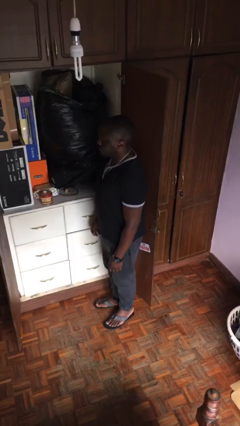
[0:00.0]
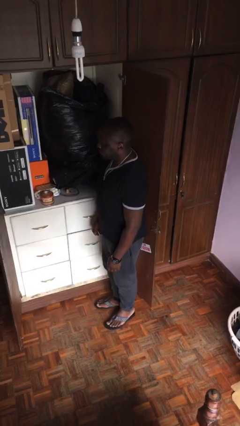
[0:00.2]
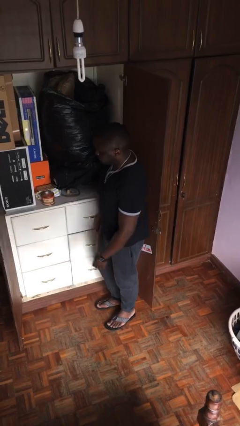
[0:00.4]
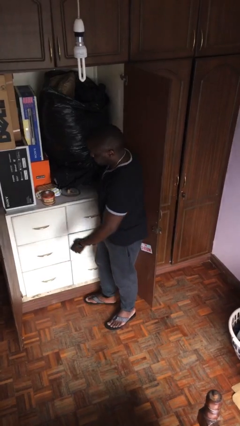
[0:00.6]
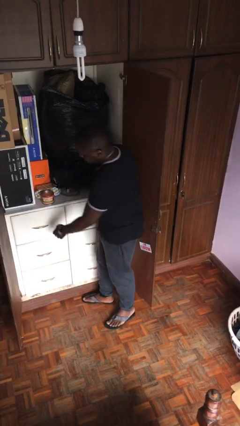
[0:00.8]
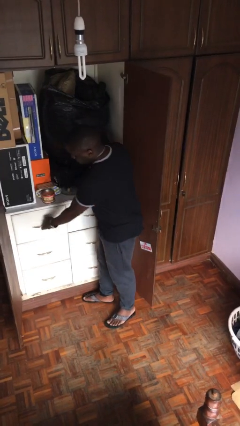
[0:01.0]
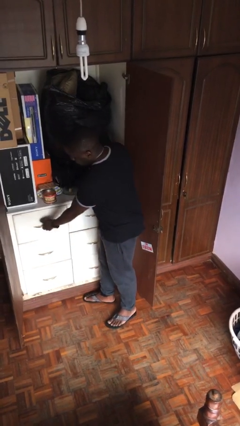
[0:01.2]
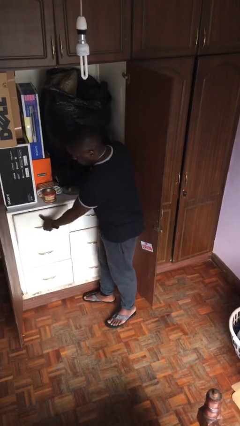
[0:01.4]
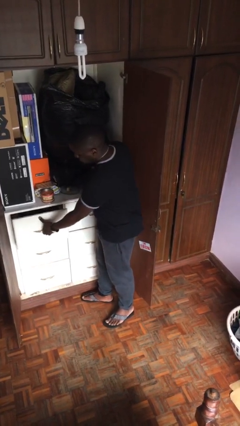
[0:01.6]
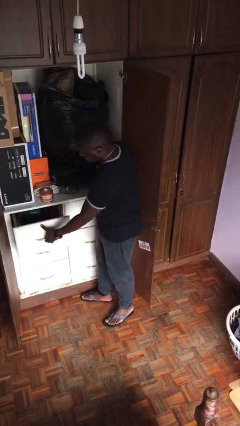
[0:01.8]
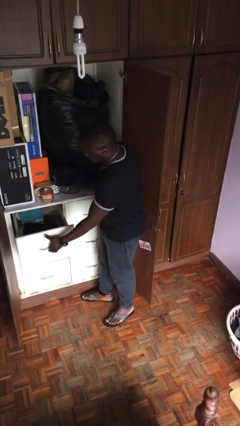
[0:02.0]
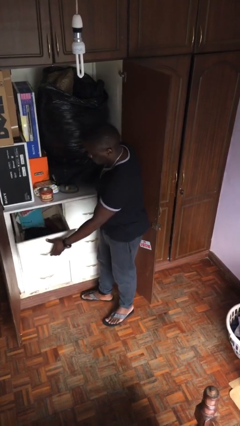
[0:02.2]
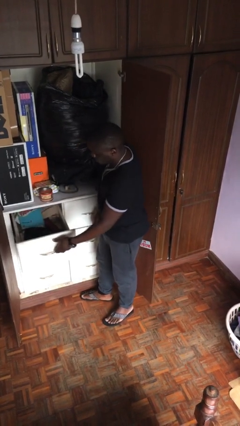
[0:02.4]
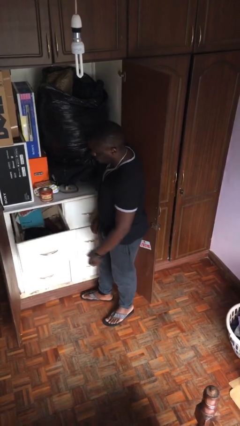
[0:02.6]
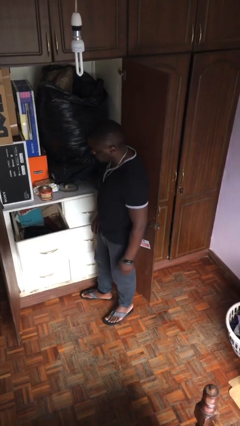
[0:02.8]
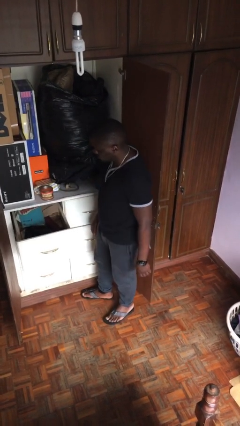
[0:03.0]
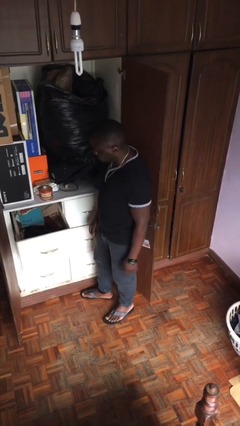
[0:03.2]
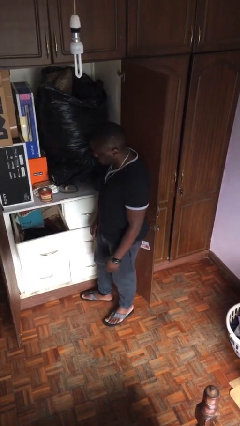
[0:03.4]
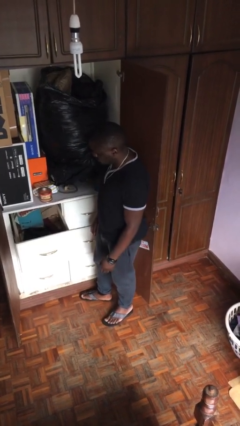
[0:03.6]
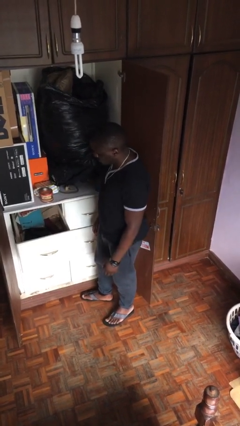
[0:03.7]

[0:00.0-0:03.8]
person opens dresser drawer

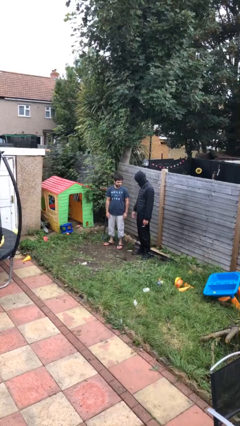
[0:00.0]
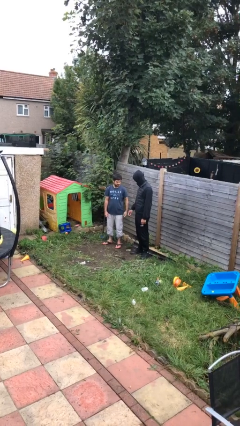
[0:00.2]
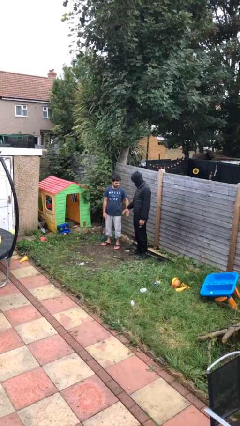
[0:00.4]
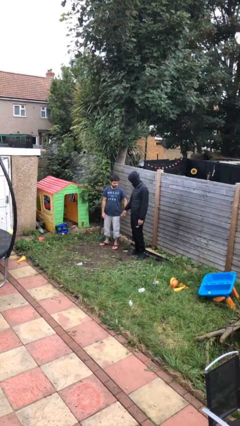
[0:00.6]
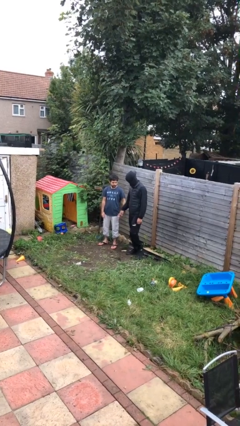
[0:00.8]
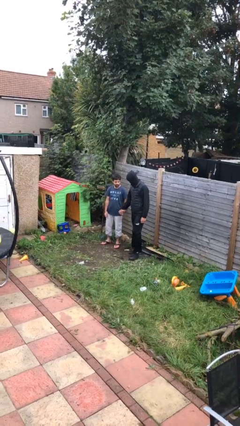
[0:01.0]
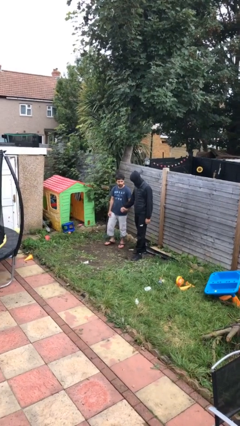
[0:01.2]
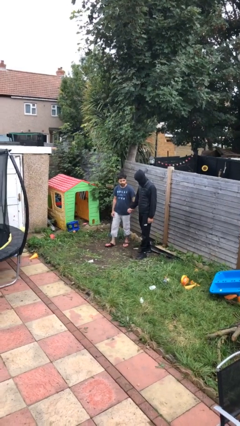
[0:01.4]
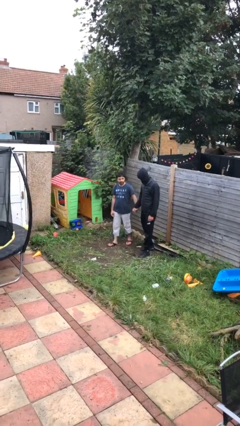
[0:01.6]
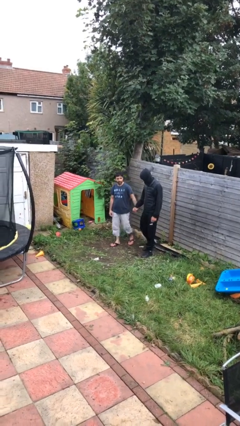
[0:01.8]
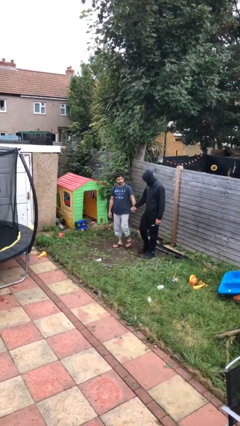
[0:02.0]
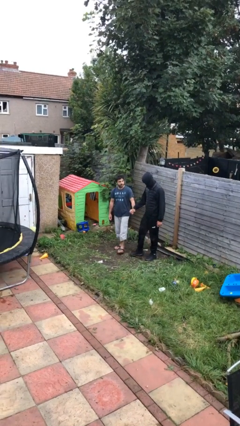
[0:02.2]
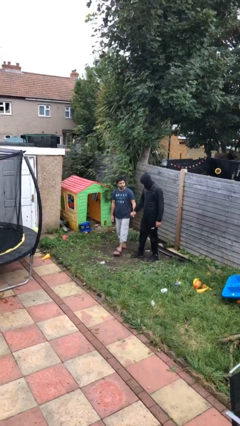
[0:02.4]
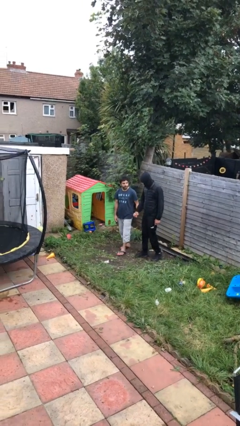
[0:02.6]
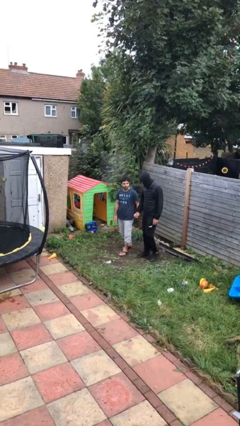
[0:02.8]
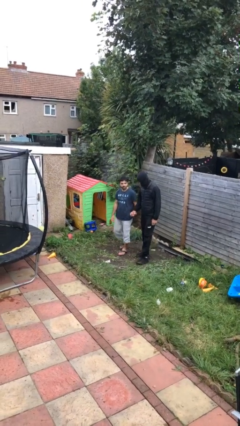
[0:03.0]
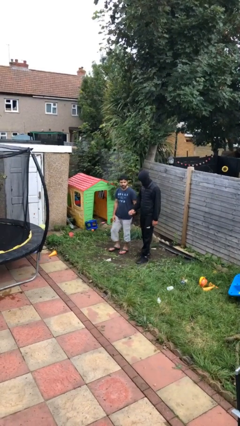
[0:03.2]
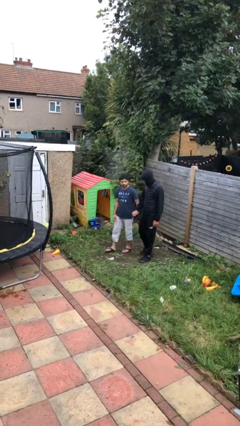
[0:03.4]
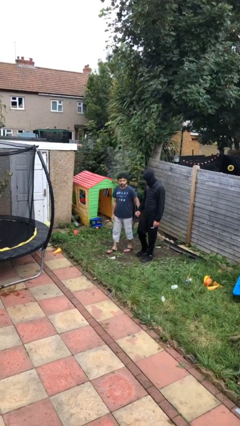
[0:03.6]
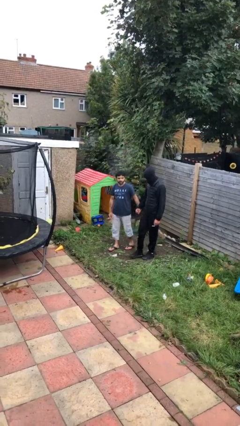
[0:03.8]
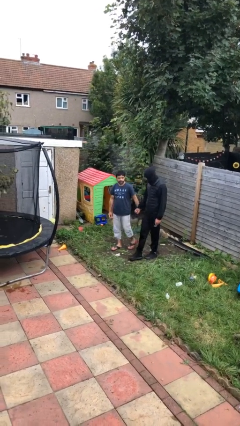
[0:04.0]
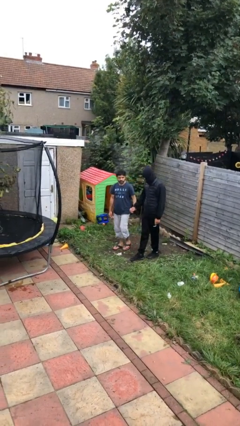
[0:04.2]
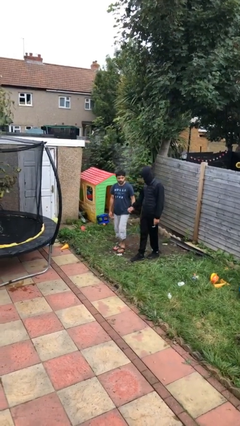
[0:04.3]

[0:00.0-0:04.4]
person holds hand

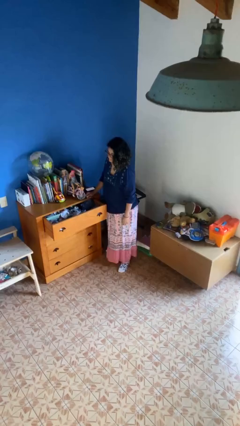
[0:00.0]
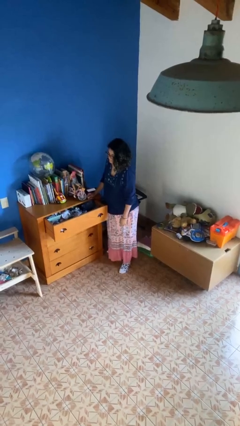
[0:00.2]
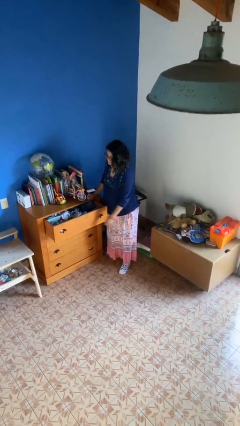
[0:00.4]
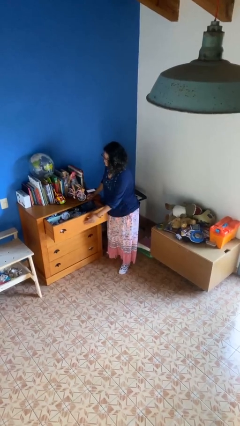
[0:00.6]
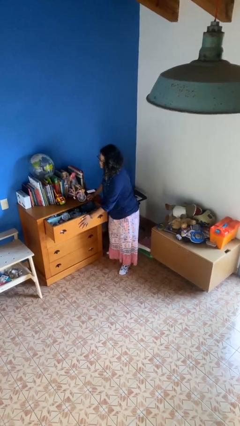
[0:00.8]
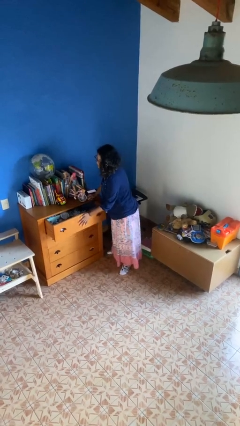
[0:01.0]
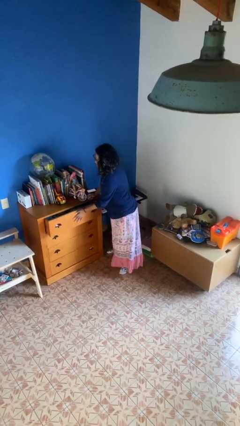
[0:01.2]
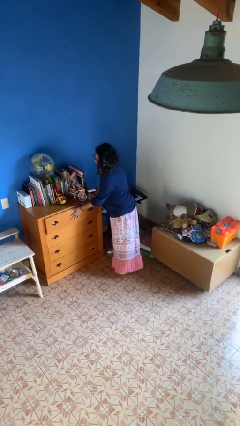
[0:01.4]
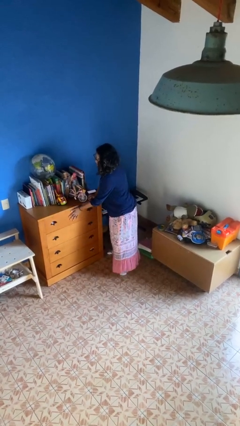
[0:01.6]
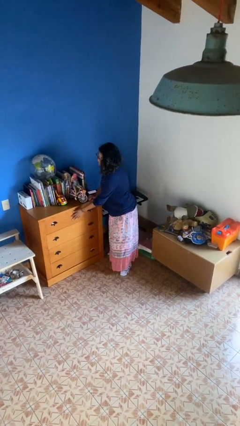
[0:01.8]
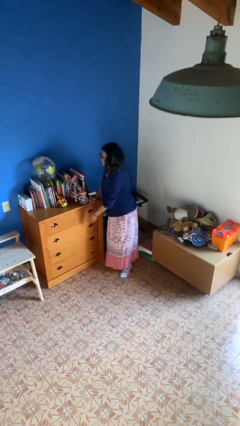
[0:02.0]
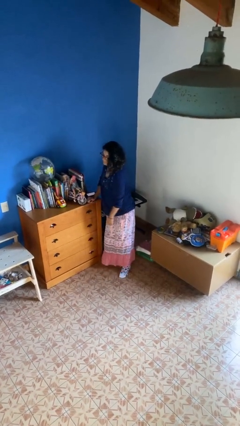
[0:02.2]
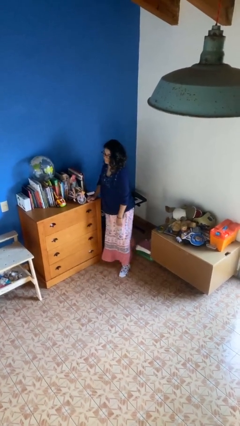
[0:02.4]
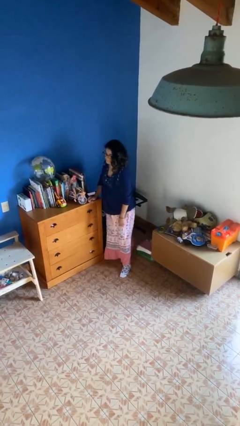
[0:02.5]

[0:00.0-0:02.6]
person closes dresser drawer

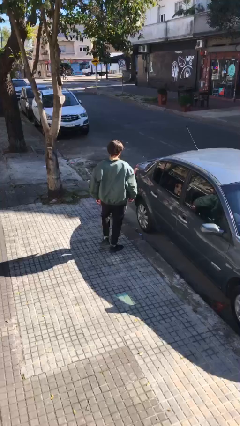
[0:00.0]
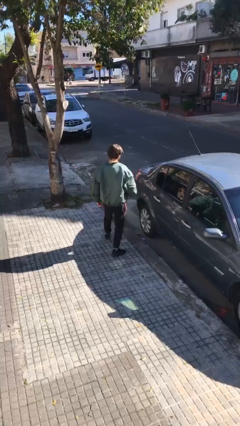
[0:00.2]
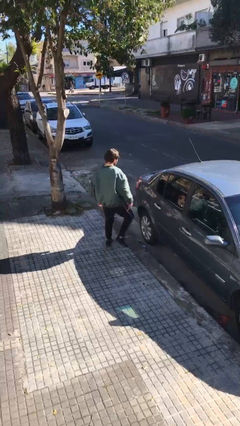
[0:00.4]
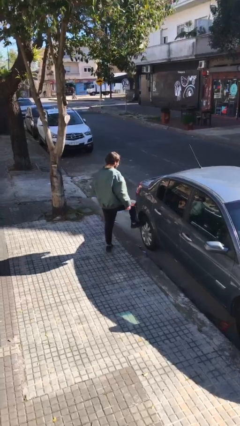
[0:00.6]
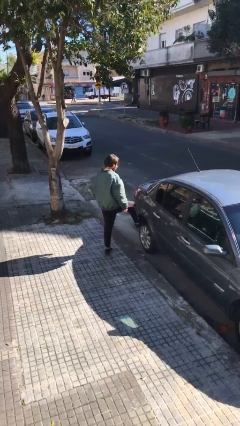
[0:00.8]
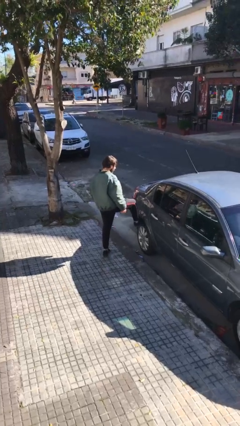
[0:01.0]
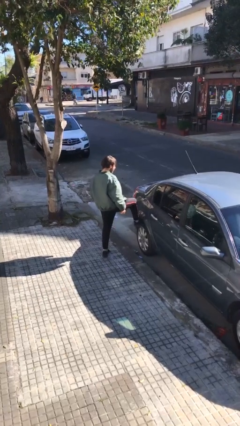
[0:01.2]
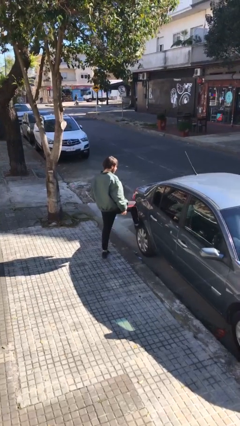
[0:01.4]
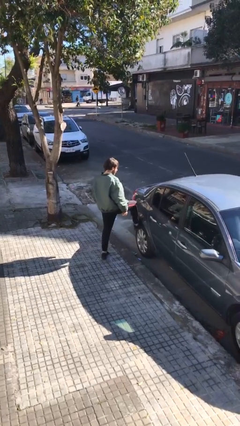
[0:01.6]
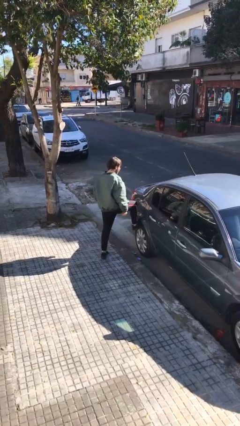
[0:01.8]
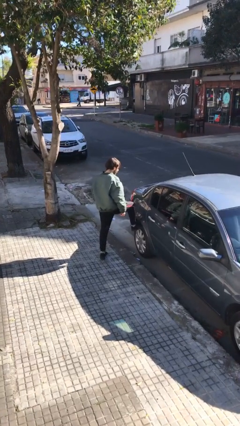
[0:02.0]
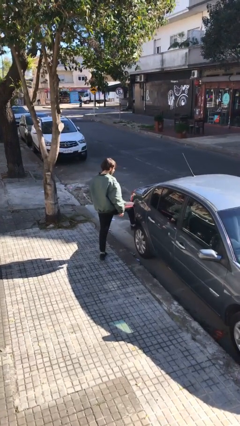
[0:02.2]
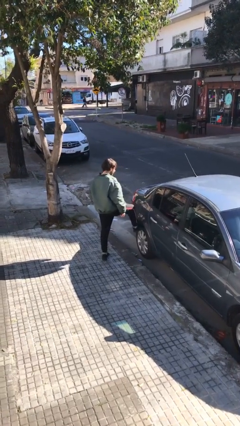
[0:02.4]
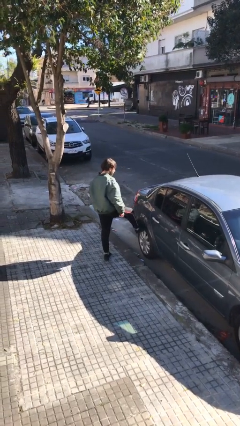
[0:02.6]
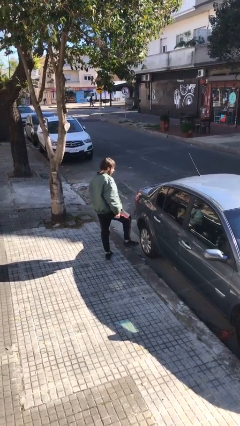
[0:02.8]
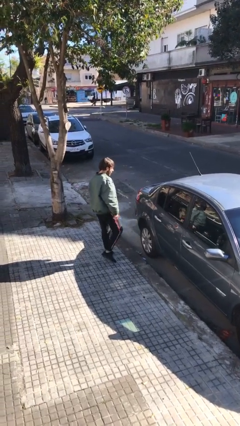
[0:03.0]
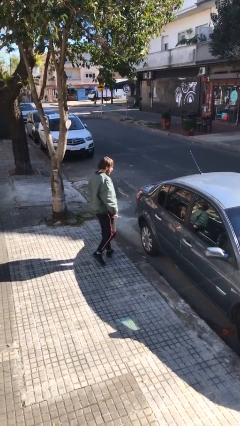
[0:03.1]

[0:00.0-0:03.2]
person kicks car tires

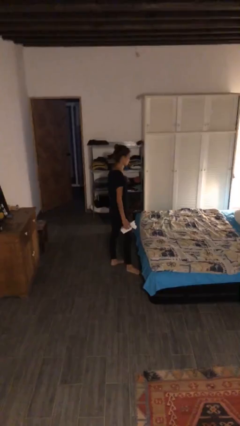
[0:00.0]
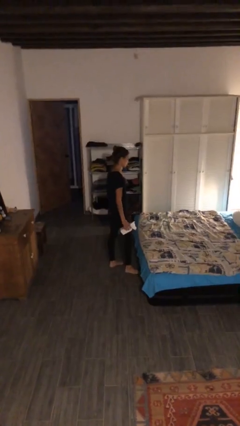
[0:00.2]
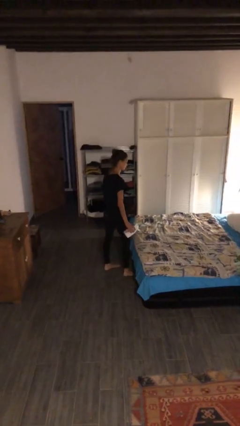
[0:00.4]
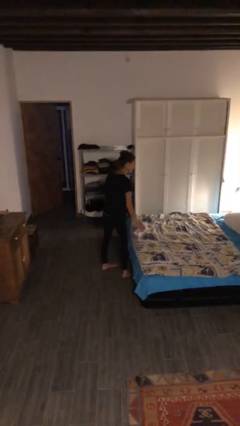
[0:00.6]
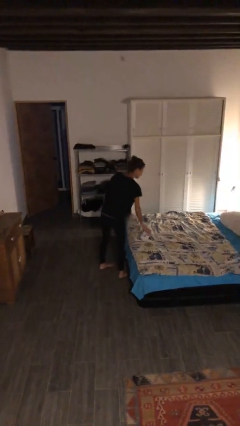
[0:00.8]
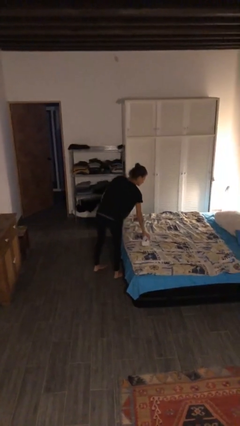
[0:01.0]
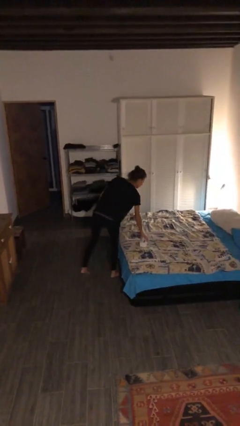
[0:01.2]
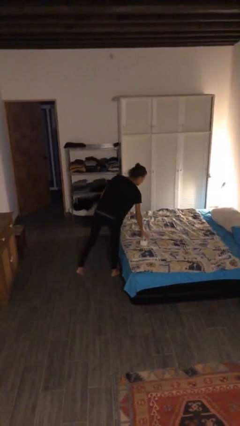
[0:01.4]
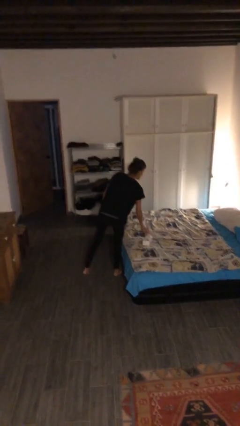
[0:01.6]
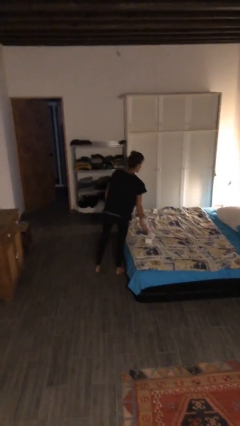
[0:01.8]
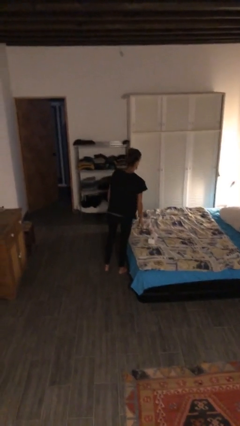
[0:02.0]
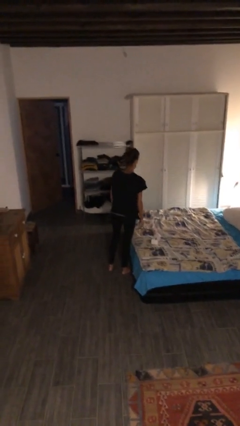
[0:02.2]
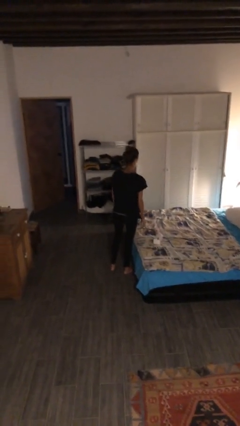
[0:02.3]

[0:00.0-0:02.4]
person puts down object on bed

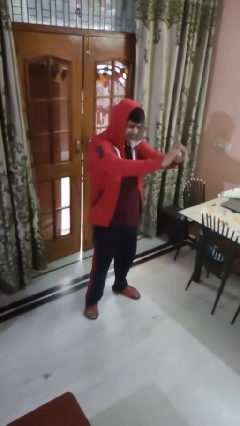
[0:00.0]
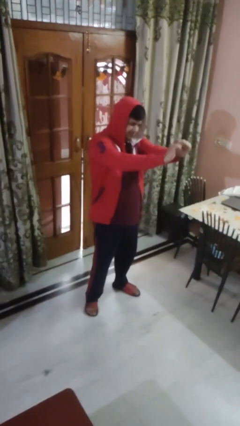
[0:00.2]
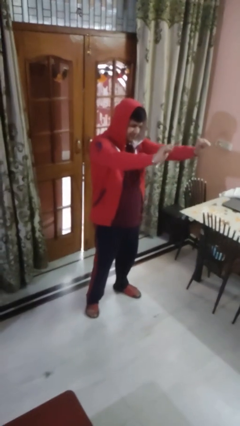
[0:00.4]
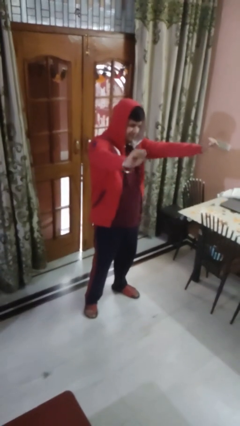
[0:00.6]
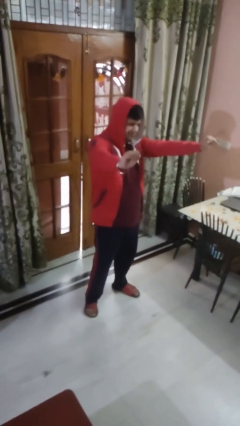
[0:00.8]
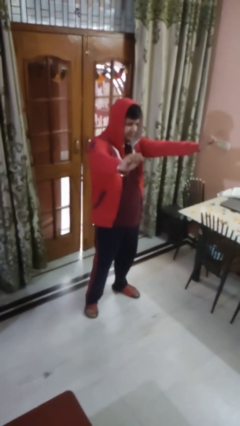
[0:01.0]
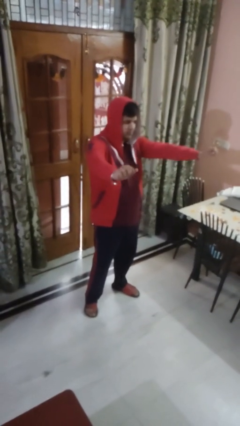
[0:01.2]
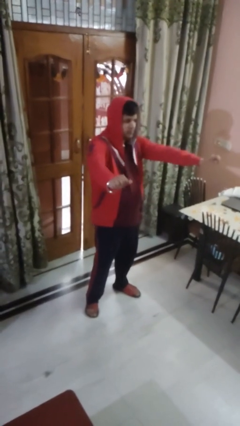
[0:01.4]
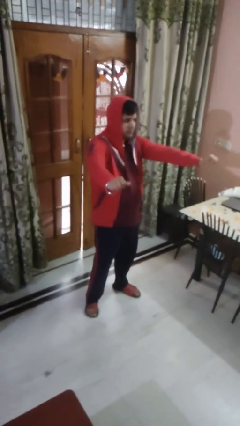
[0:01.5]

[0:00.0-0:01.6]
person gestures zoom in
